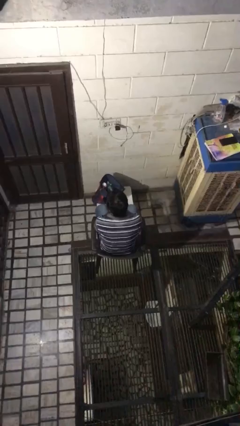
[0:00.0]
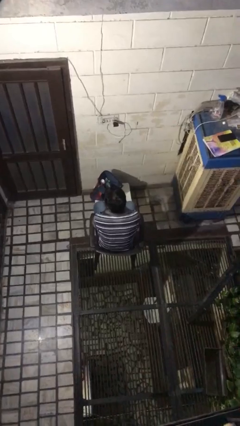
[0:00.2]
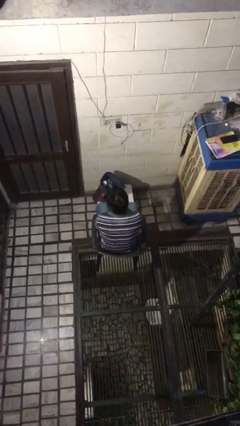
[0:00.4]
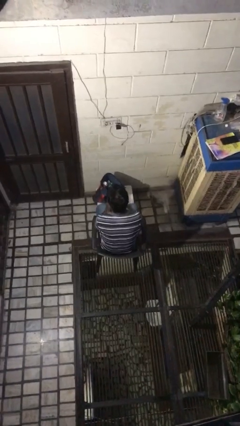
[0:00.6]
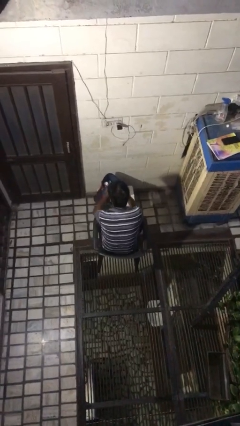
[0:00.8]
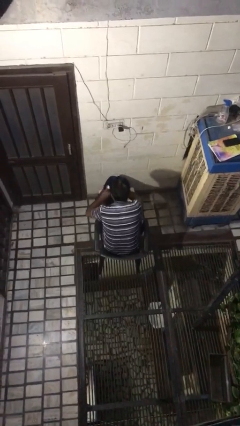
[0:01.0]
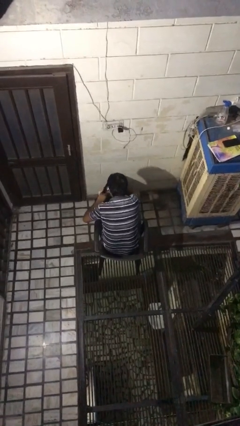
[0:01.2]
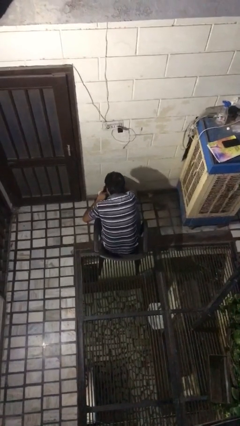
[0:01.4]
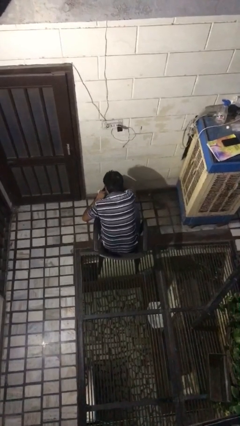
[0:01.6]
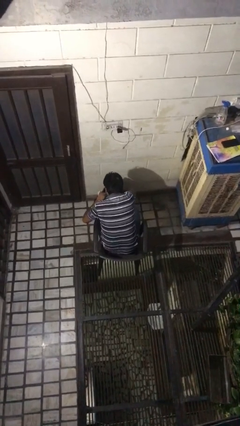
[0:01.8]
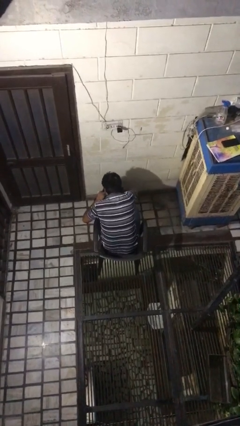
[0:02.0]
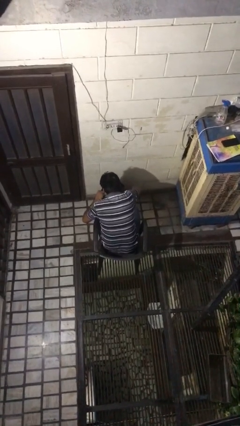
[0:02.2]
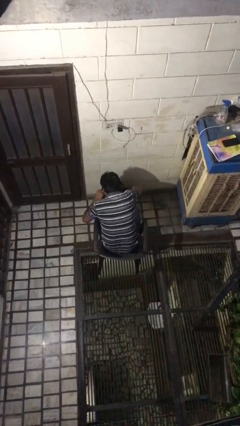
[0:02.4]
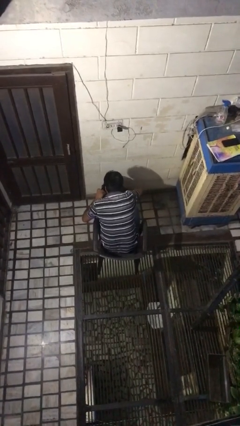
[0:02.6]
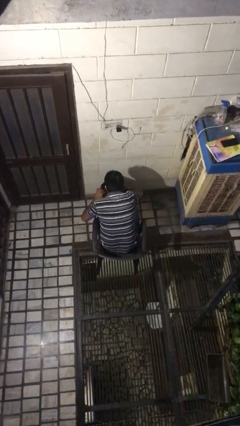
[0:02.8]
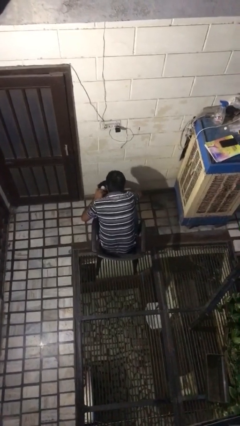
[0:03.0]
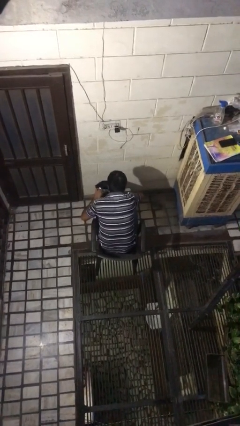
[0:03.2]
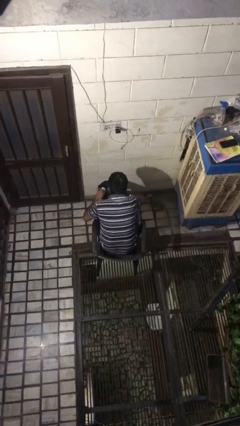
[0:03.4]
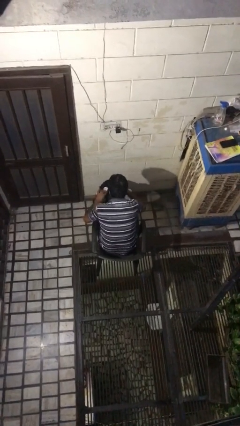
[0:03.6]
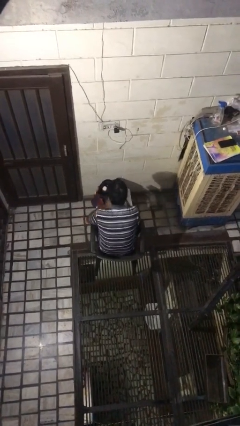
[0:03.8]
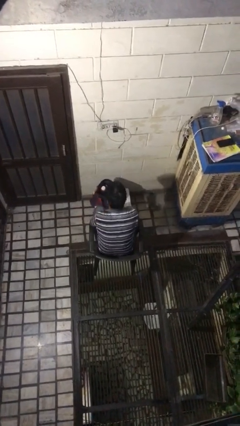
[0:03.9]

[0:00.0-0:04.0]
person searches in bag

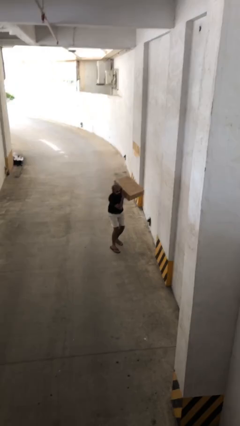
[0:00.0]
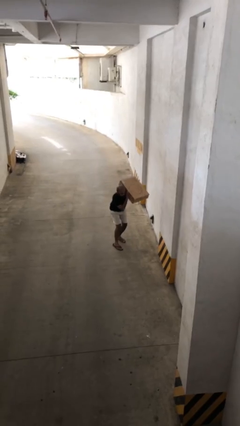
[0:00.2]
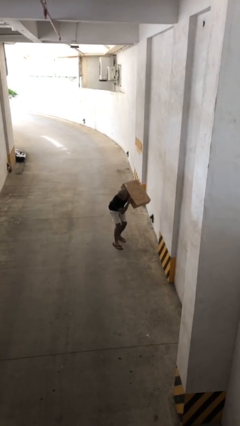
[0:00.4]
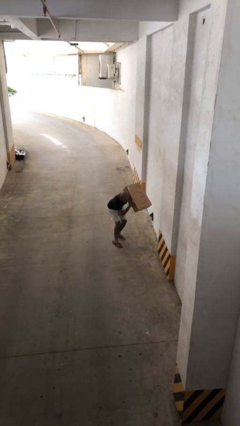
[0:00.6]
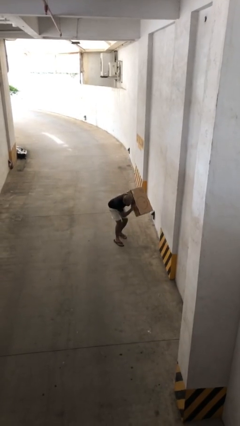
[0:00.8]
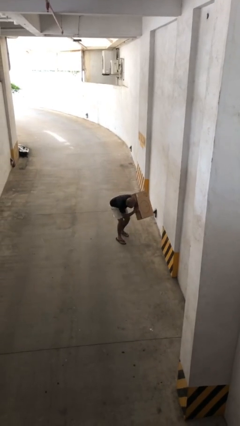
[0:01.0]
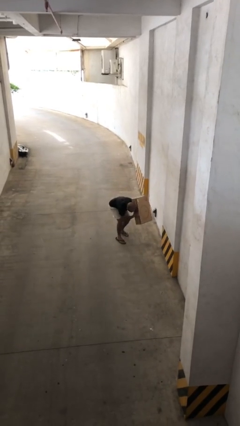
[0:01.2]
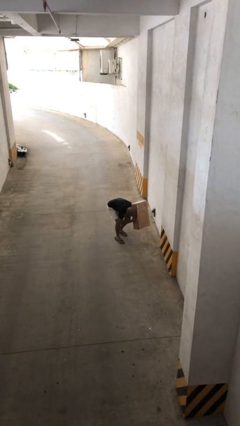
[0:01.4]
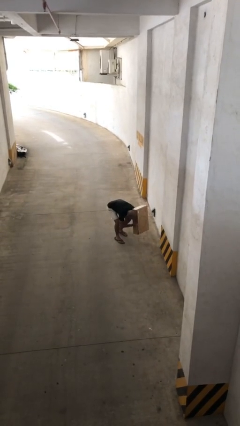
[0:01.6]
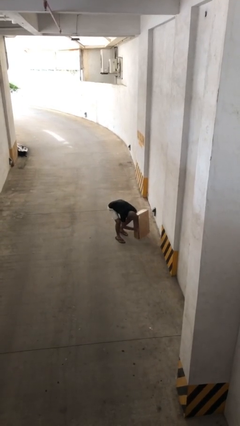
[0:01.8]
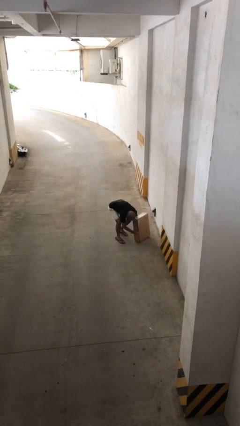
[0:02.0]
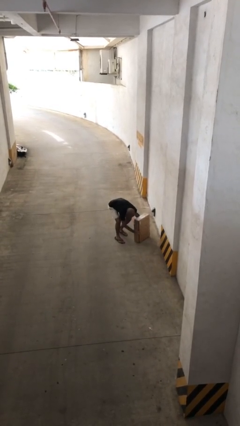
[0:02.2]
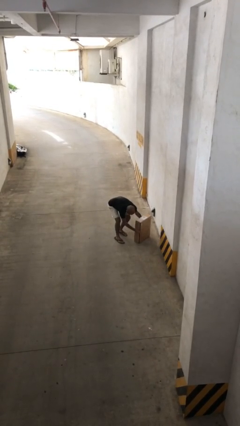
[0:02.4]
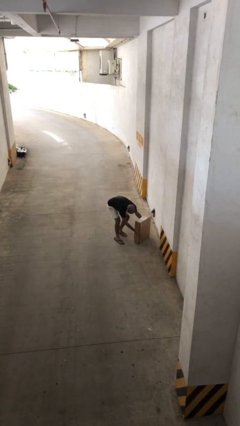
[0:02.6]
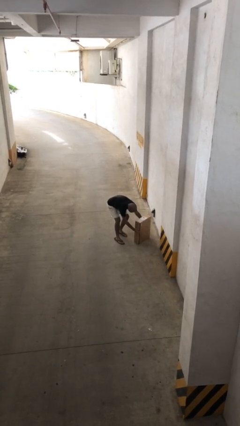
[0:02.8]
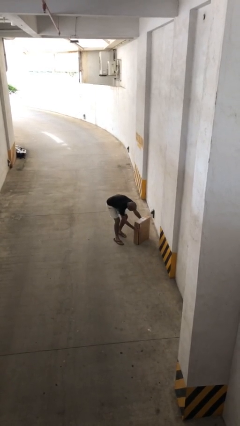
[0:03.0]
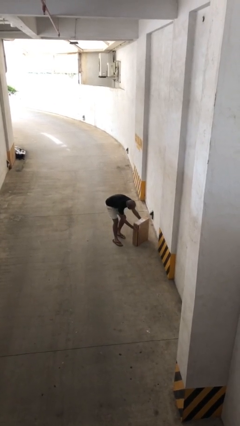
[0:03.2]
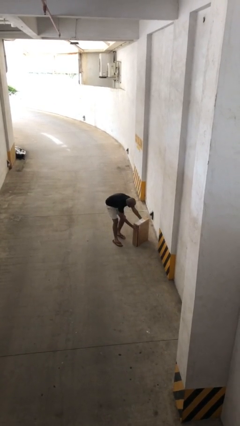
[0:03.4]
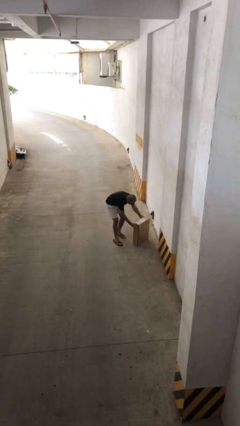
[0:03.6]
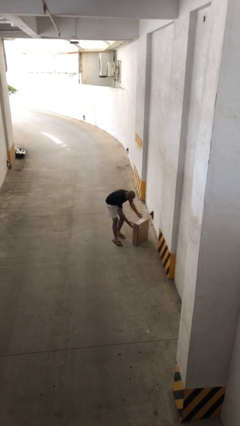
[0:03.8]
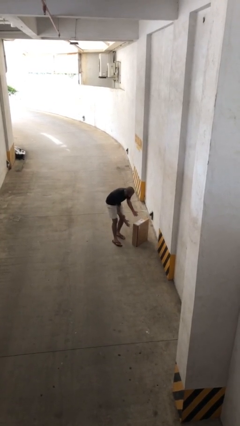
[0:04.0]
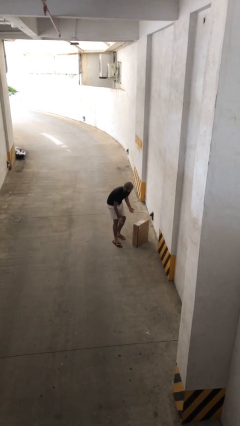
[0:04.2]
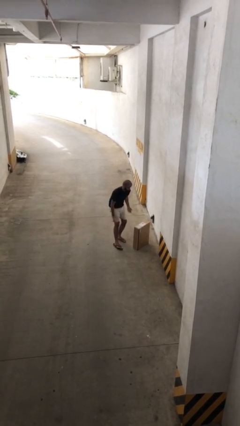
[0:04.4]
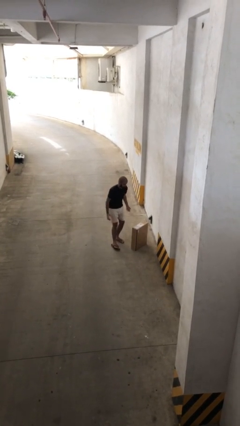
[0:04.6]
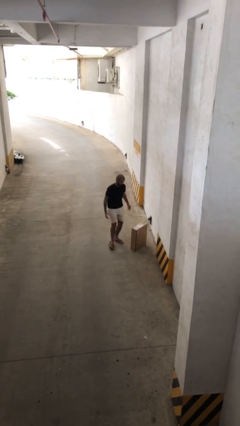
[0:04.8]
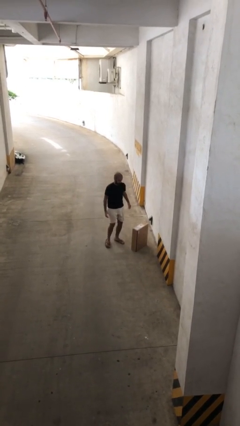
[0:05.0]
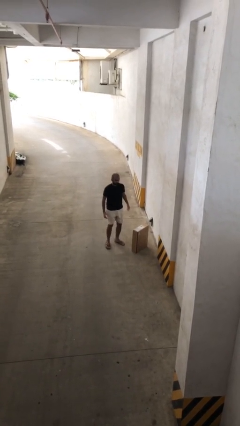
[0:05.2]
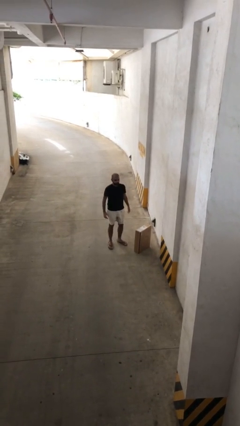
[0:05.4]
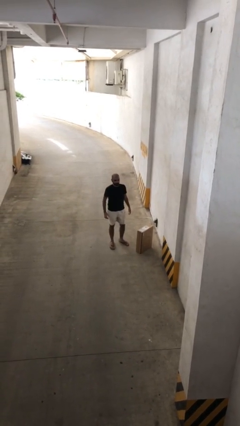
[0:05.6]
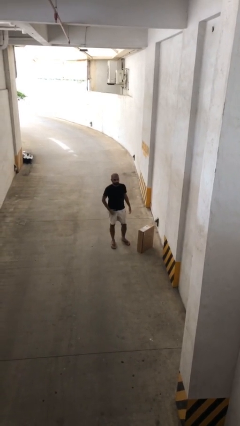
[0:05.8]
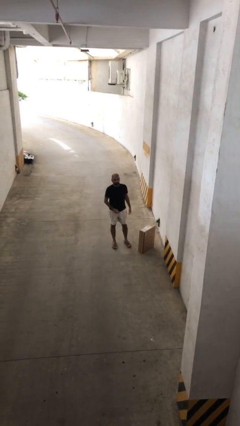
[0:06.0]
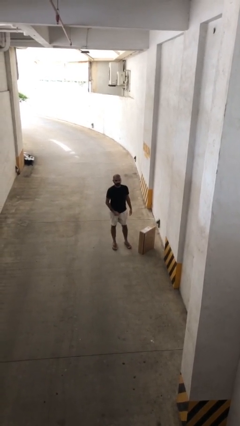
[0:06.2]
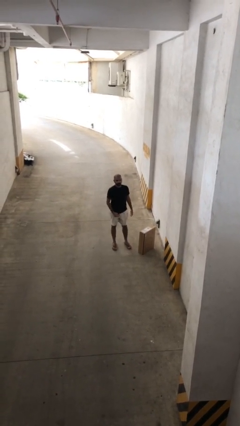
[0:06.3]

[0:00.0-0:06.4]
person puts down object on floor

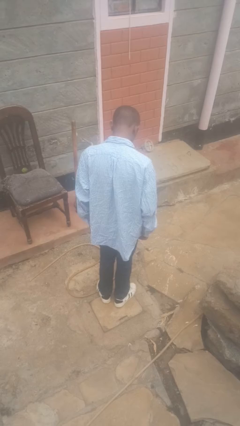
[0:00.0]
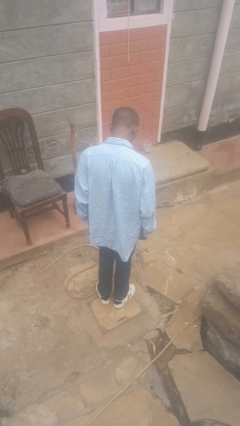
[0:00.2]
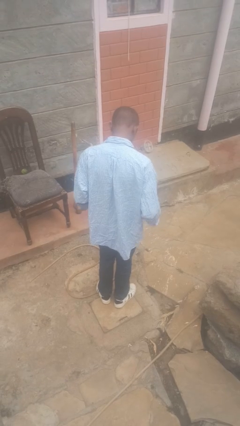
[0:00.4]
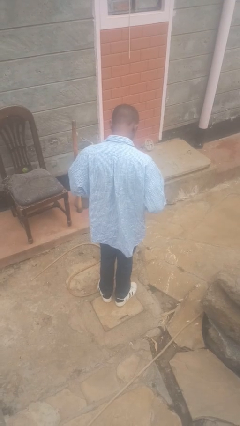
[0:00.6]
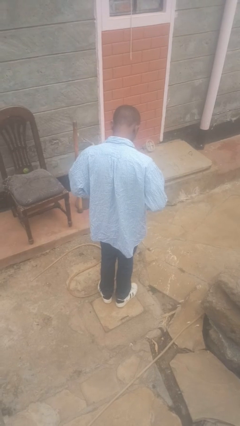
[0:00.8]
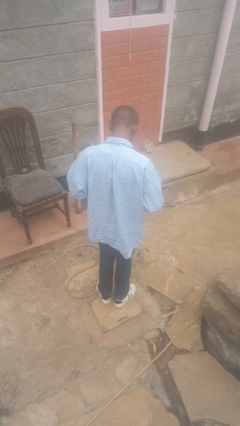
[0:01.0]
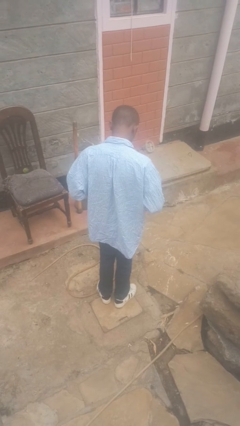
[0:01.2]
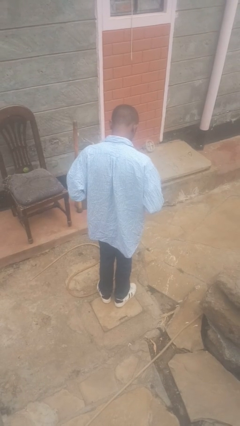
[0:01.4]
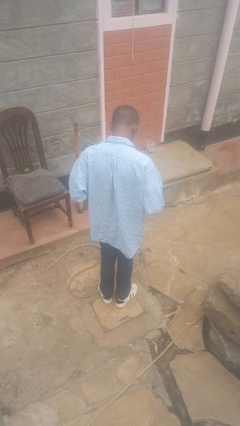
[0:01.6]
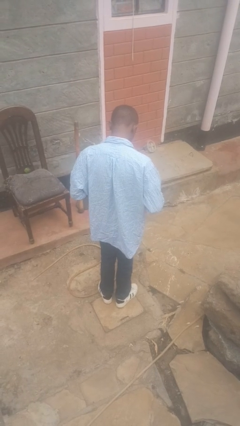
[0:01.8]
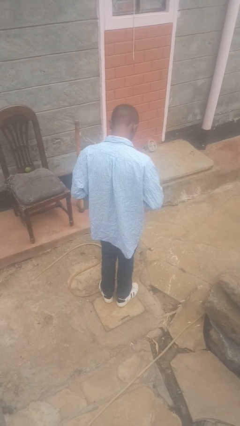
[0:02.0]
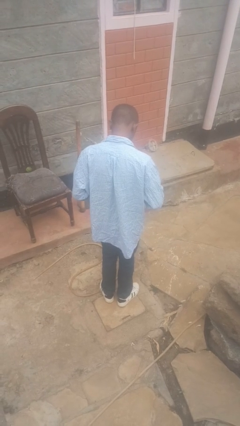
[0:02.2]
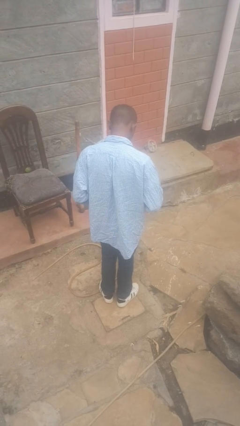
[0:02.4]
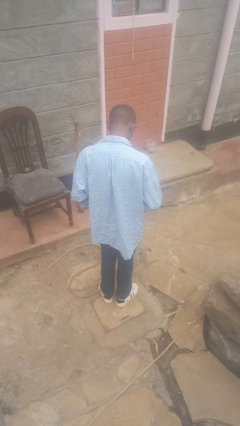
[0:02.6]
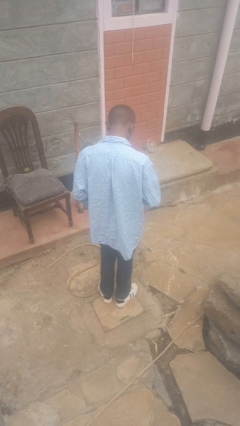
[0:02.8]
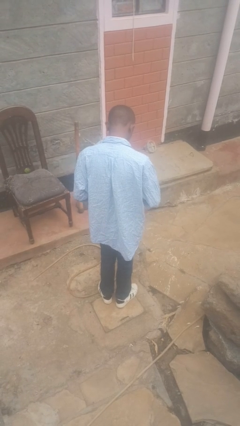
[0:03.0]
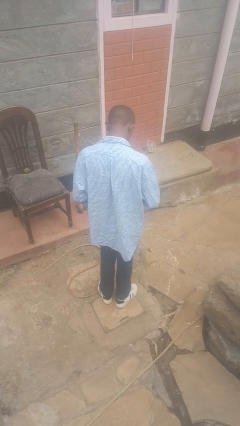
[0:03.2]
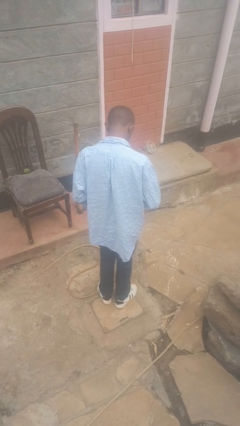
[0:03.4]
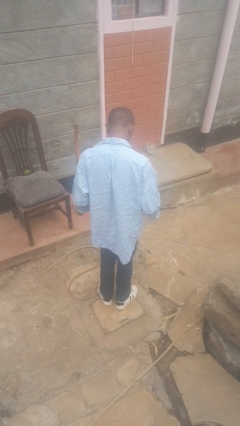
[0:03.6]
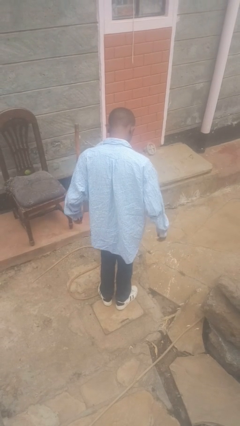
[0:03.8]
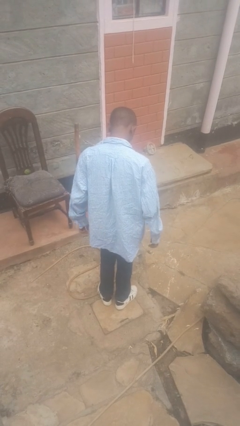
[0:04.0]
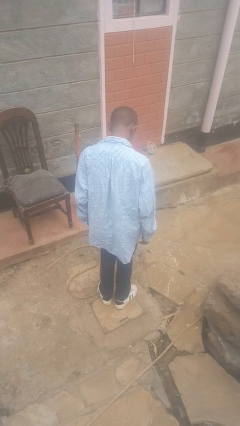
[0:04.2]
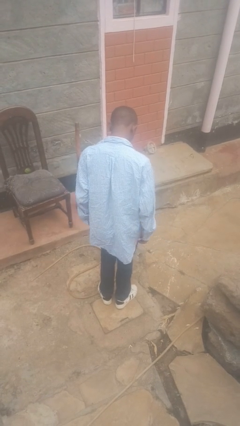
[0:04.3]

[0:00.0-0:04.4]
person unbuttons shirt

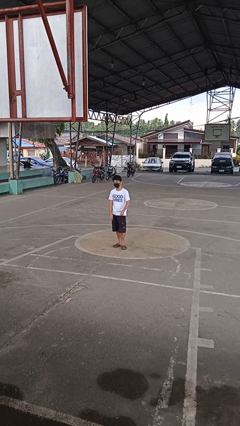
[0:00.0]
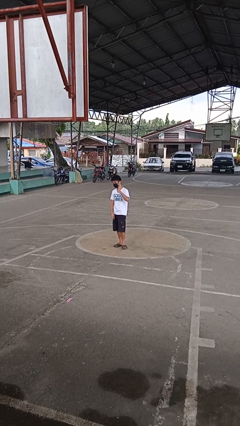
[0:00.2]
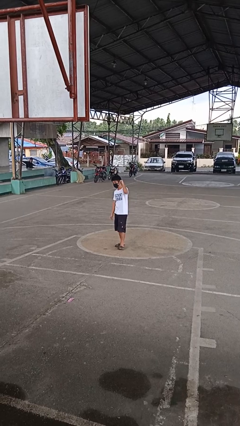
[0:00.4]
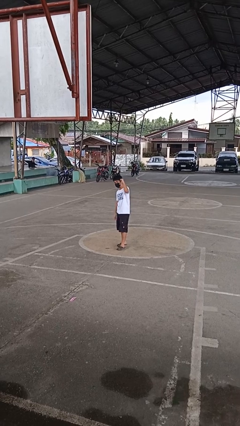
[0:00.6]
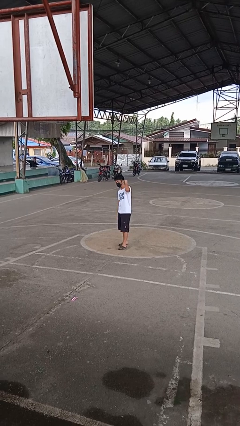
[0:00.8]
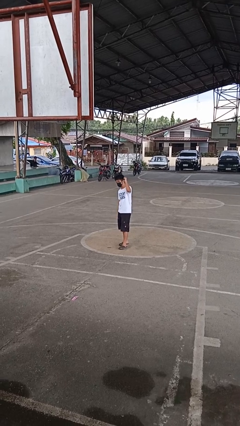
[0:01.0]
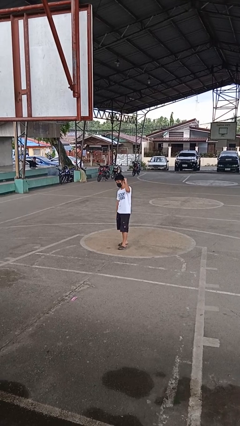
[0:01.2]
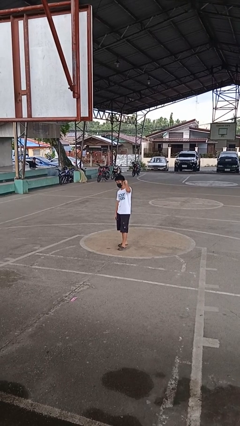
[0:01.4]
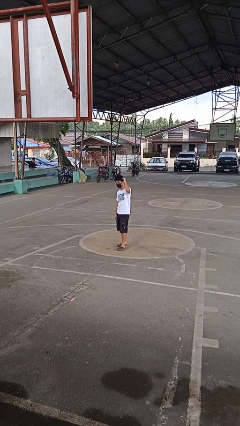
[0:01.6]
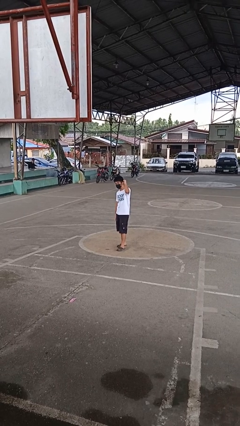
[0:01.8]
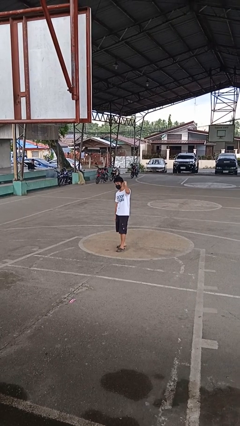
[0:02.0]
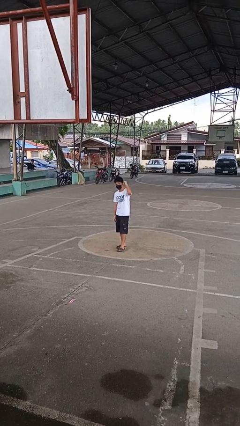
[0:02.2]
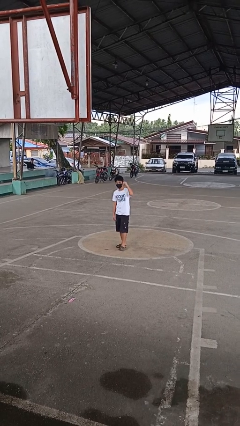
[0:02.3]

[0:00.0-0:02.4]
person gestures behind me
